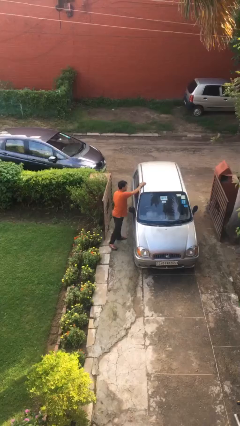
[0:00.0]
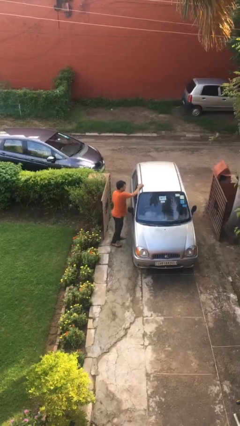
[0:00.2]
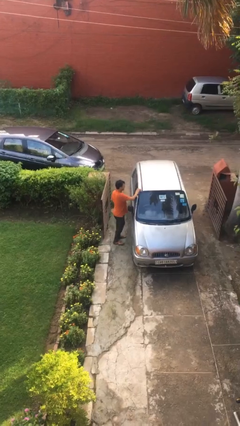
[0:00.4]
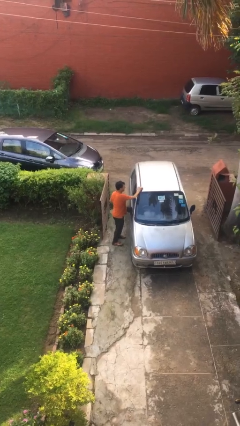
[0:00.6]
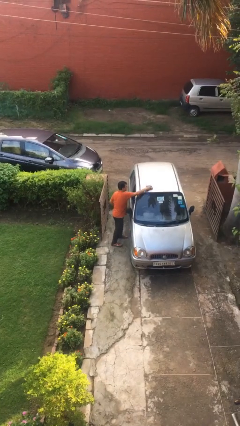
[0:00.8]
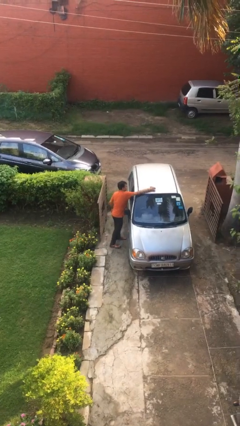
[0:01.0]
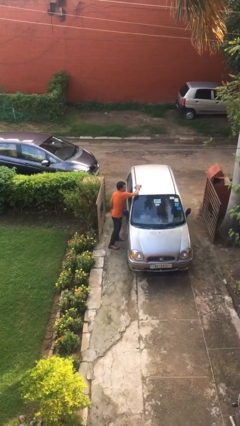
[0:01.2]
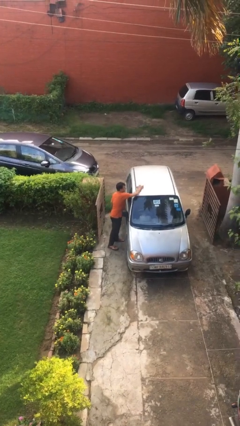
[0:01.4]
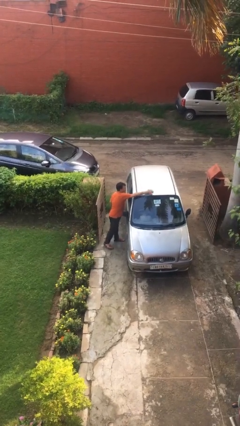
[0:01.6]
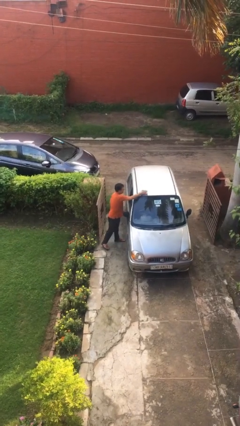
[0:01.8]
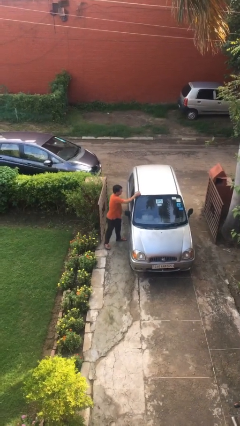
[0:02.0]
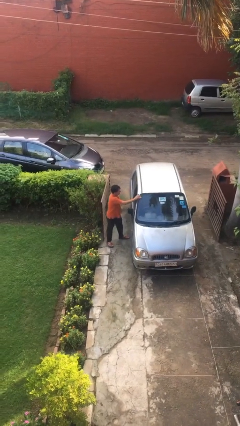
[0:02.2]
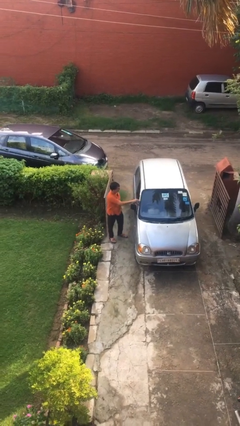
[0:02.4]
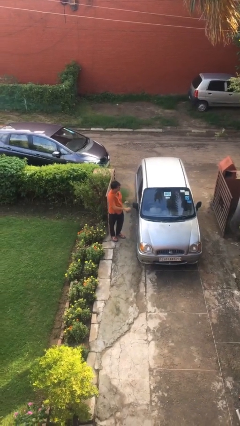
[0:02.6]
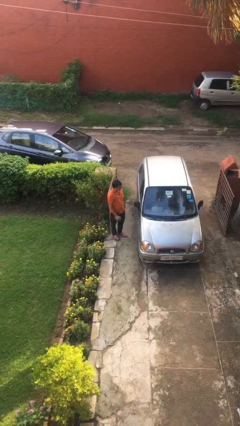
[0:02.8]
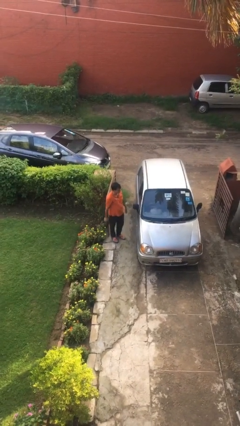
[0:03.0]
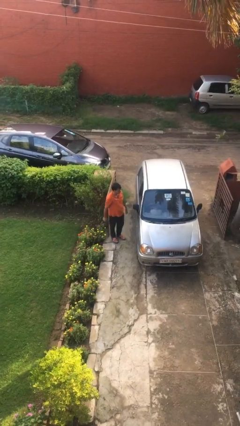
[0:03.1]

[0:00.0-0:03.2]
person polishes car with rag

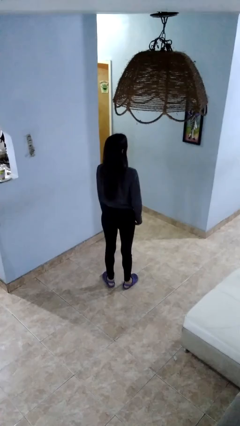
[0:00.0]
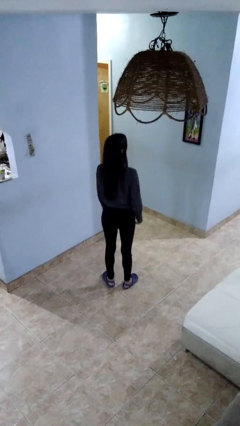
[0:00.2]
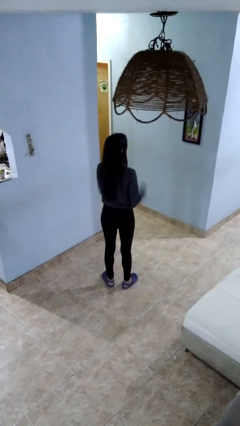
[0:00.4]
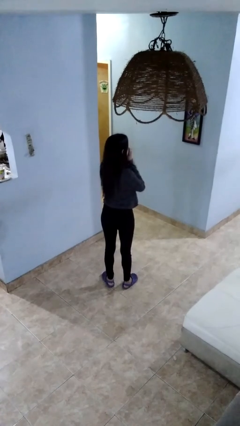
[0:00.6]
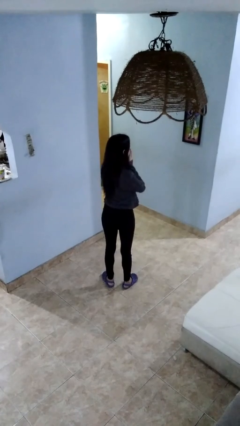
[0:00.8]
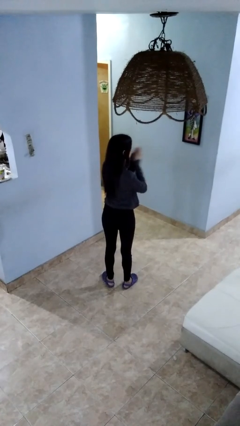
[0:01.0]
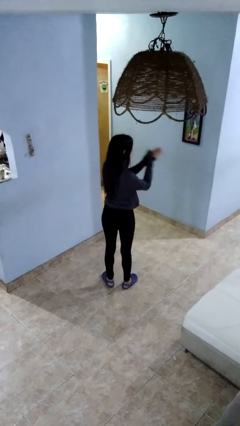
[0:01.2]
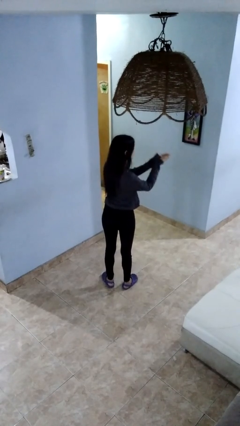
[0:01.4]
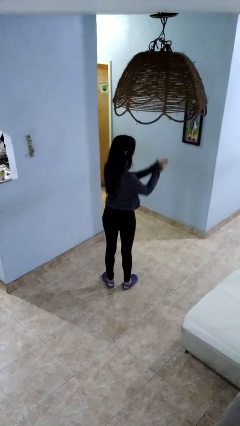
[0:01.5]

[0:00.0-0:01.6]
person gestures blow kiss

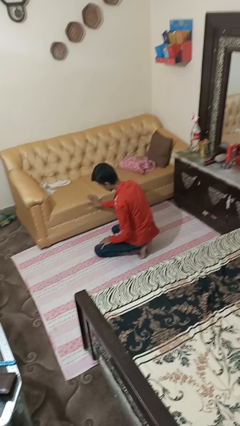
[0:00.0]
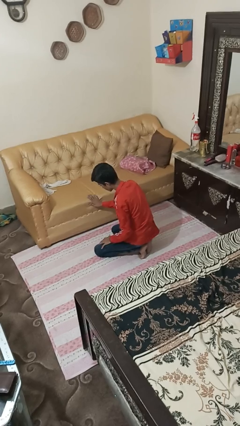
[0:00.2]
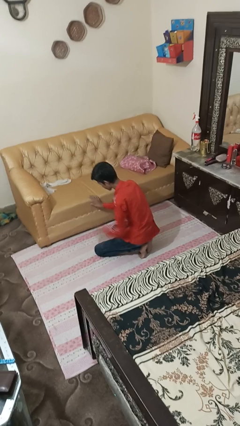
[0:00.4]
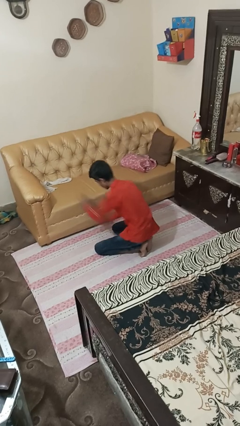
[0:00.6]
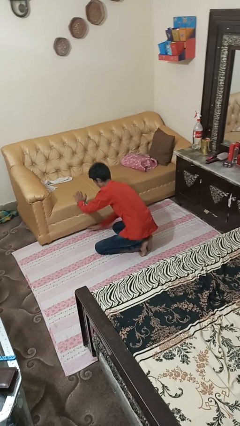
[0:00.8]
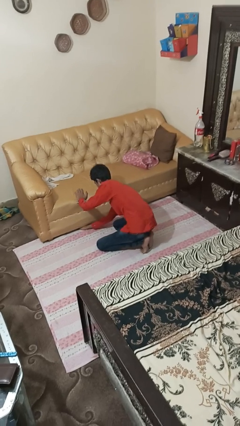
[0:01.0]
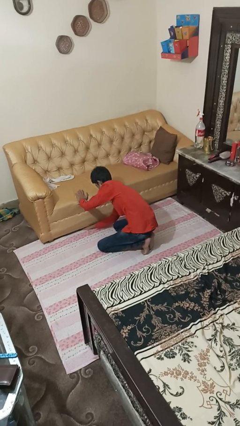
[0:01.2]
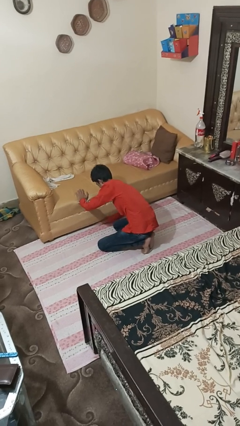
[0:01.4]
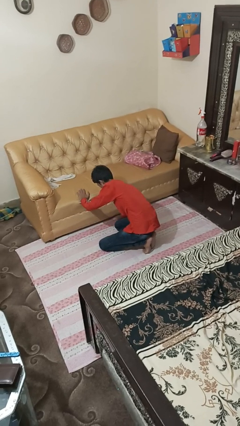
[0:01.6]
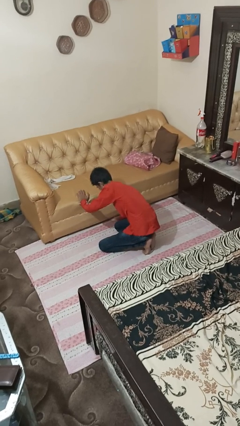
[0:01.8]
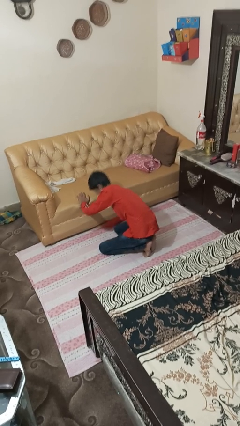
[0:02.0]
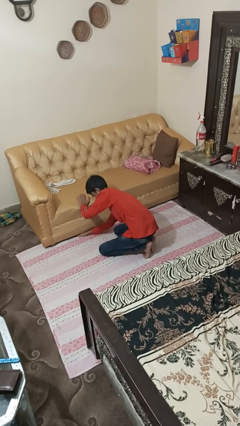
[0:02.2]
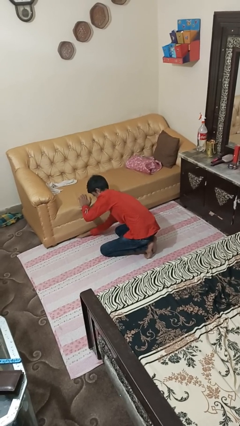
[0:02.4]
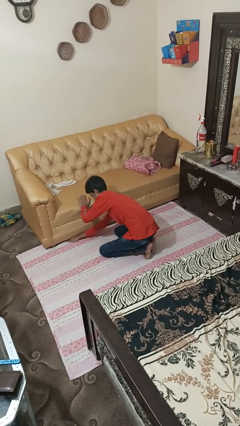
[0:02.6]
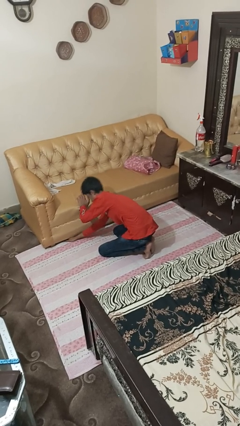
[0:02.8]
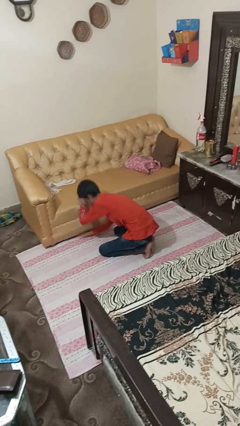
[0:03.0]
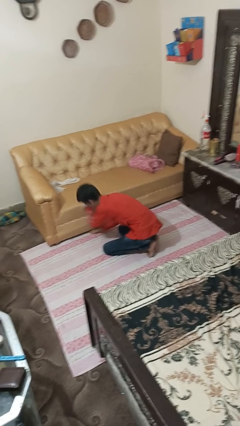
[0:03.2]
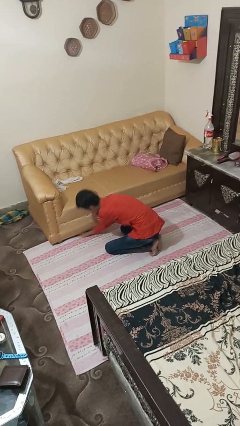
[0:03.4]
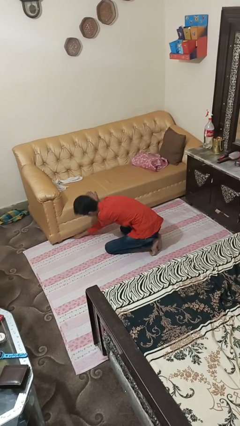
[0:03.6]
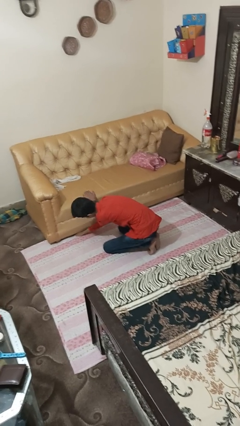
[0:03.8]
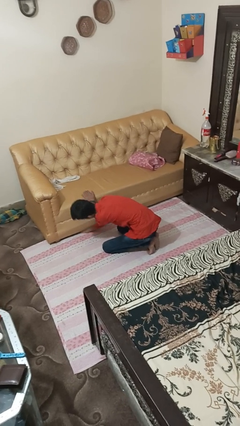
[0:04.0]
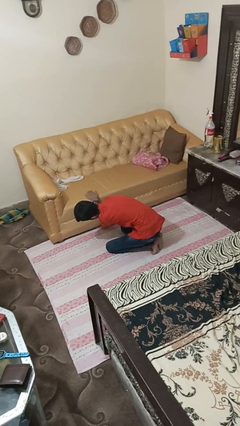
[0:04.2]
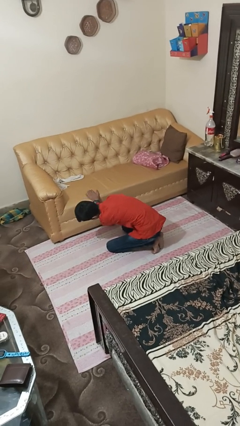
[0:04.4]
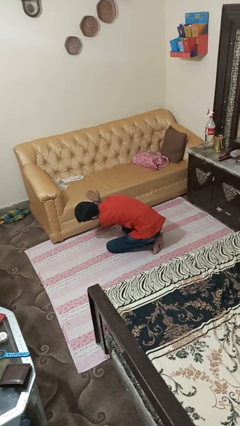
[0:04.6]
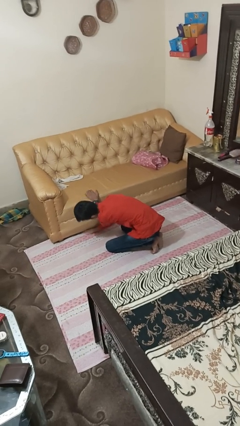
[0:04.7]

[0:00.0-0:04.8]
person searches under couch

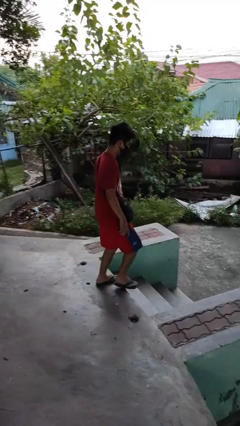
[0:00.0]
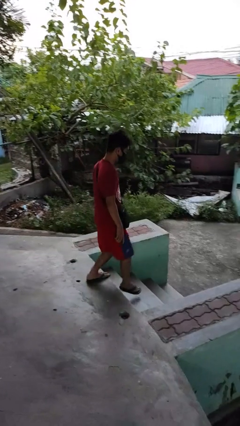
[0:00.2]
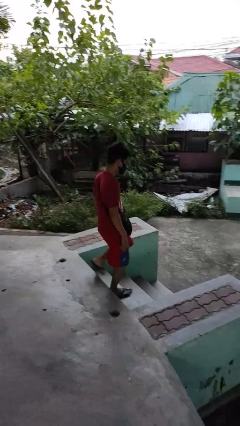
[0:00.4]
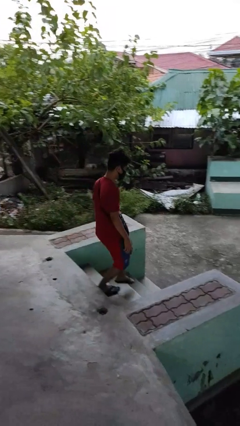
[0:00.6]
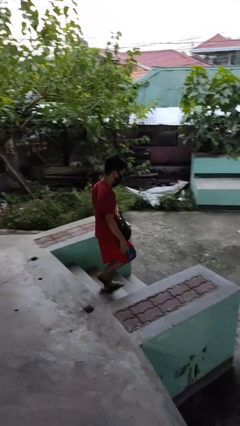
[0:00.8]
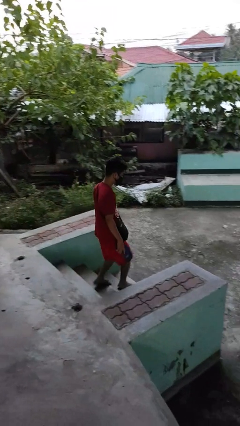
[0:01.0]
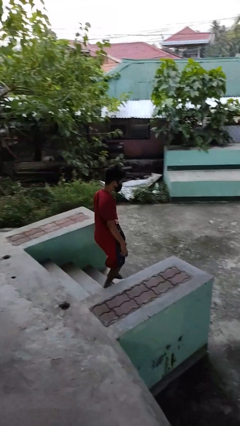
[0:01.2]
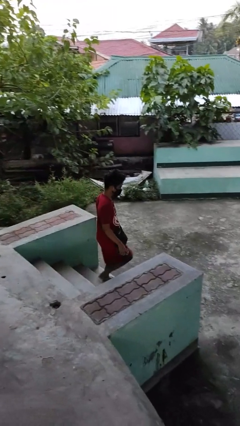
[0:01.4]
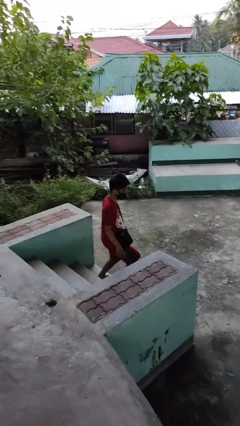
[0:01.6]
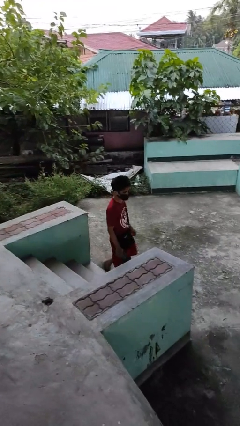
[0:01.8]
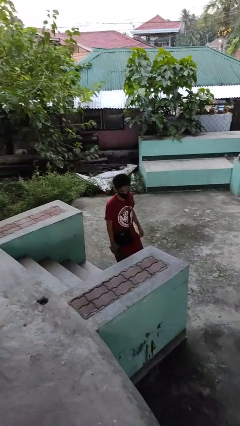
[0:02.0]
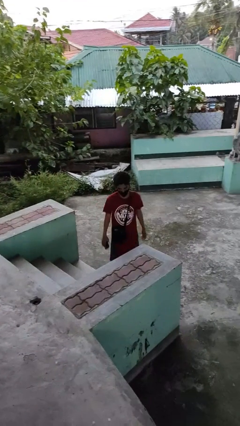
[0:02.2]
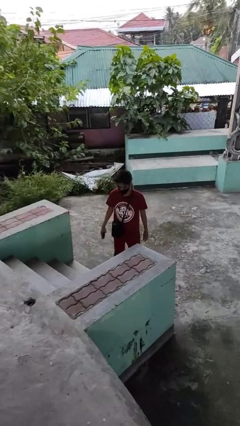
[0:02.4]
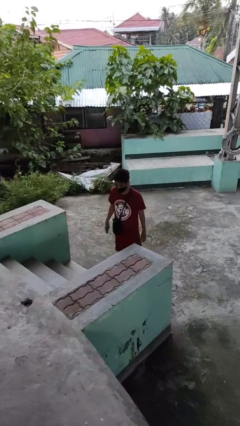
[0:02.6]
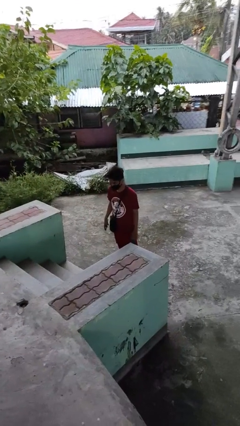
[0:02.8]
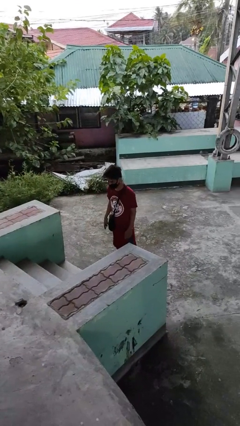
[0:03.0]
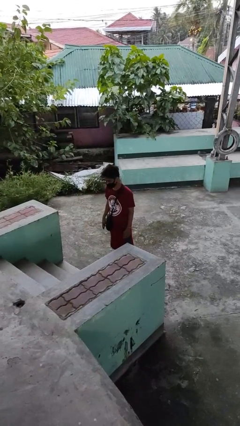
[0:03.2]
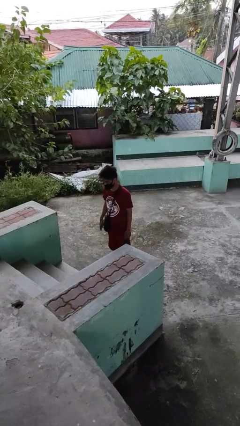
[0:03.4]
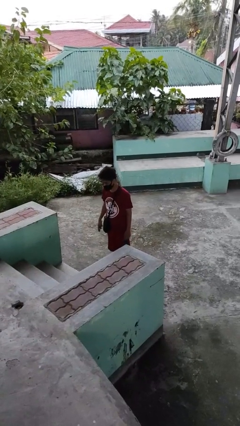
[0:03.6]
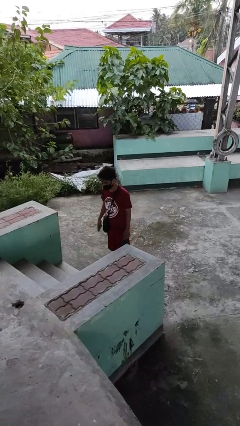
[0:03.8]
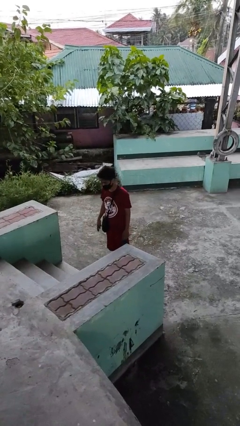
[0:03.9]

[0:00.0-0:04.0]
person climbs down stairs

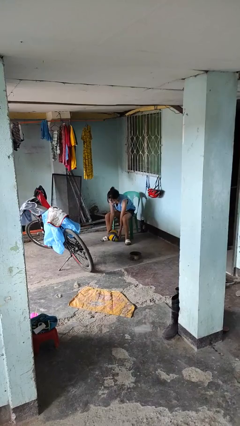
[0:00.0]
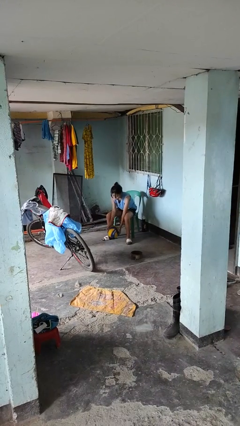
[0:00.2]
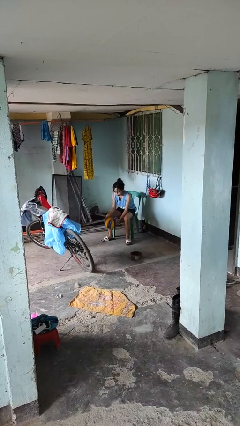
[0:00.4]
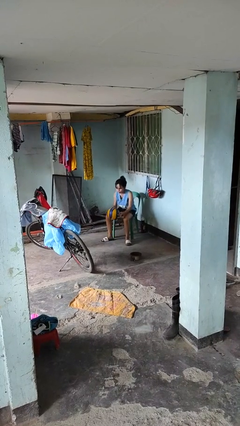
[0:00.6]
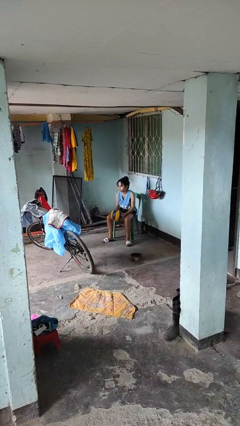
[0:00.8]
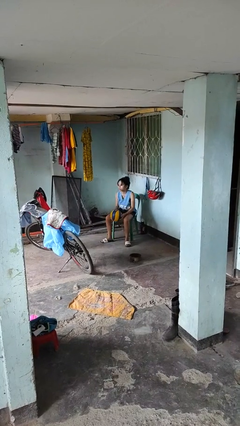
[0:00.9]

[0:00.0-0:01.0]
person picks up object from floor

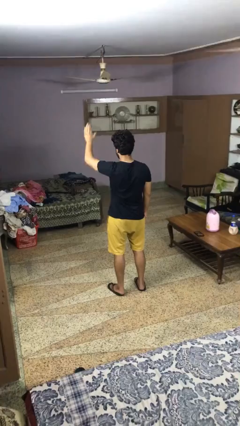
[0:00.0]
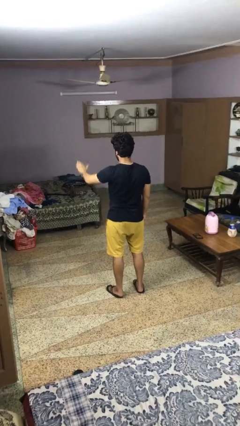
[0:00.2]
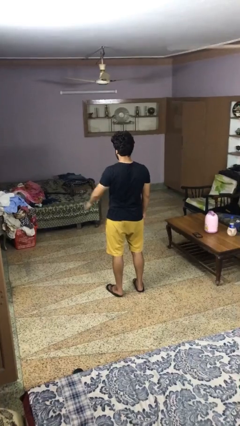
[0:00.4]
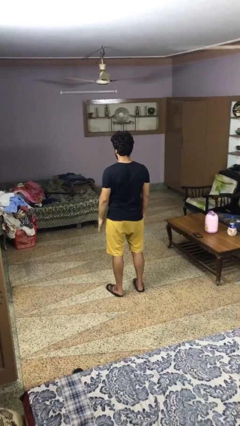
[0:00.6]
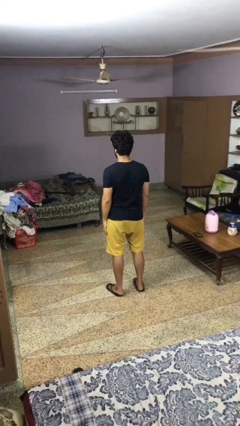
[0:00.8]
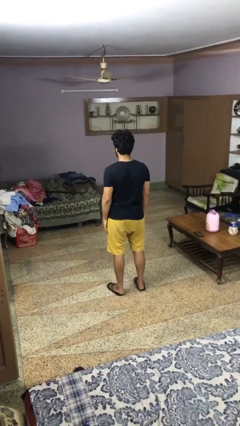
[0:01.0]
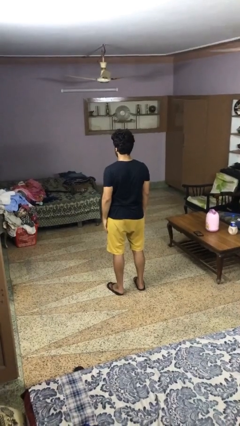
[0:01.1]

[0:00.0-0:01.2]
person gestures lower hand

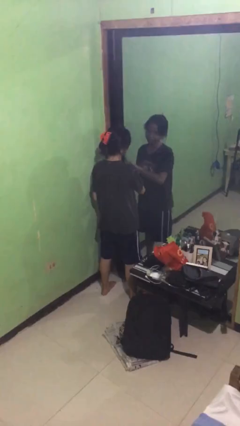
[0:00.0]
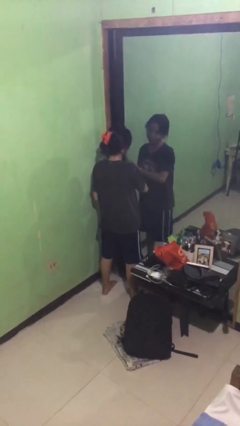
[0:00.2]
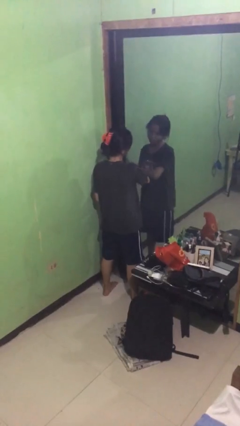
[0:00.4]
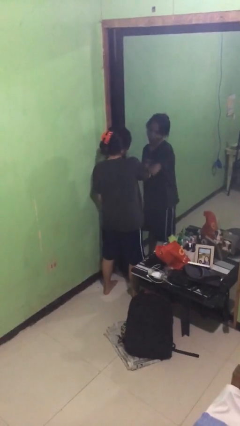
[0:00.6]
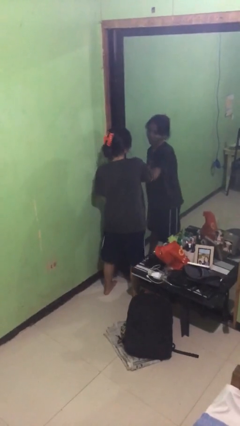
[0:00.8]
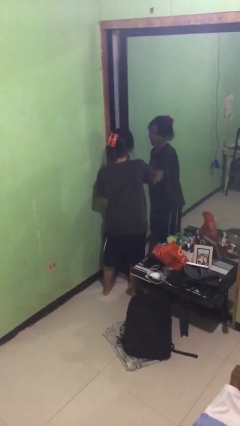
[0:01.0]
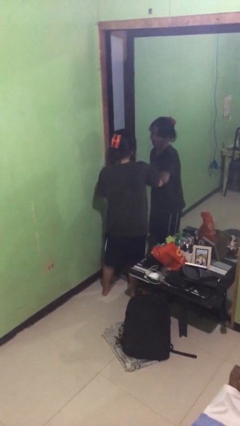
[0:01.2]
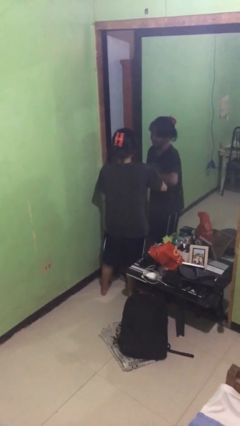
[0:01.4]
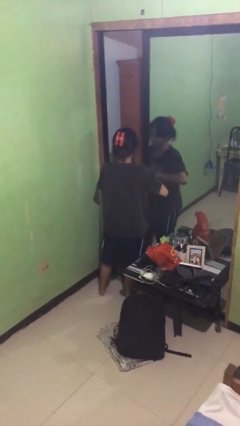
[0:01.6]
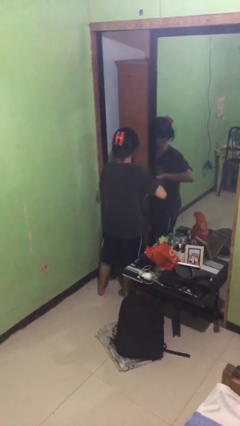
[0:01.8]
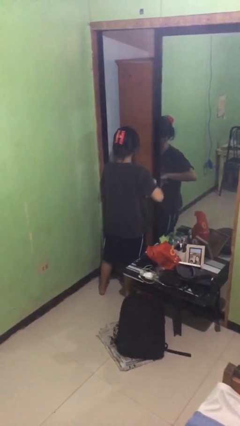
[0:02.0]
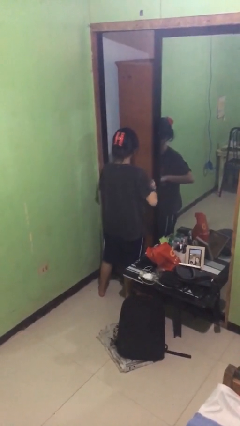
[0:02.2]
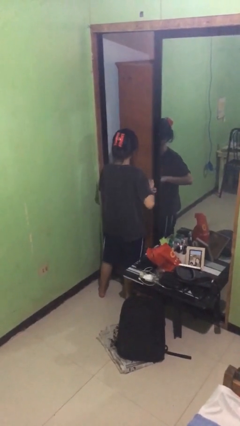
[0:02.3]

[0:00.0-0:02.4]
person opens sliding door
